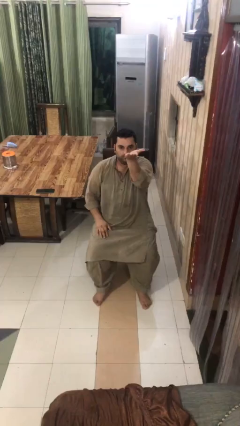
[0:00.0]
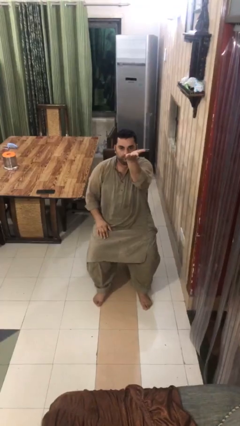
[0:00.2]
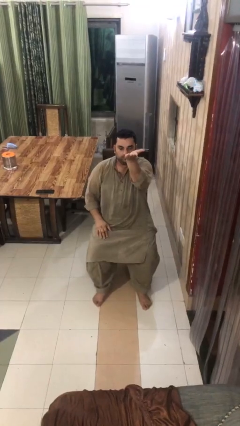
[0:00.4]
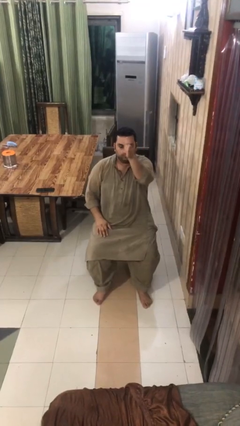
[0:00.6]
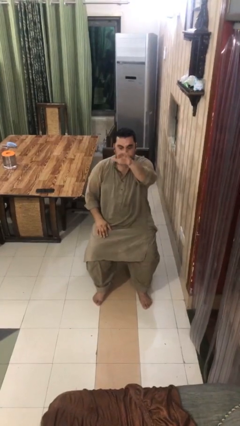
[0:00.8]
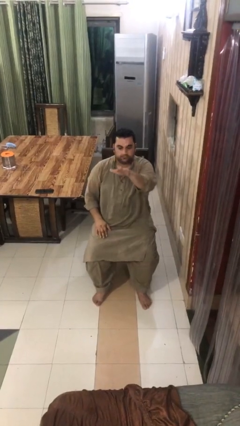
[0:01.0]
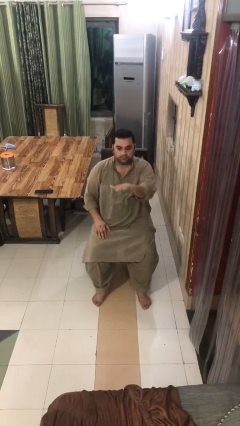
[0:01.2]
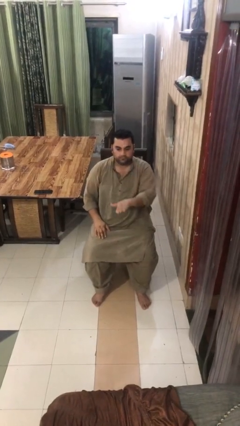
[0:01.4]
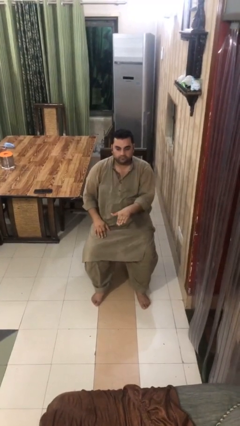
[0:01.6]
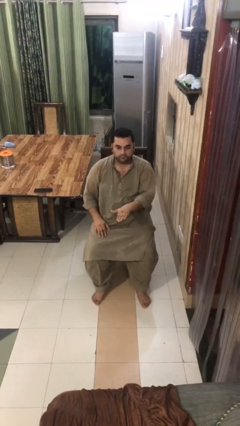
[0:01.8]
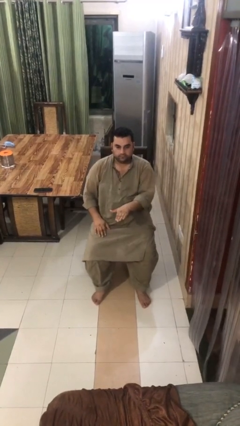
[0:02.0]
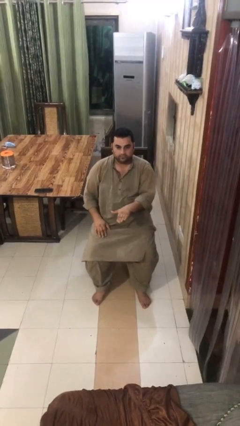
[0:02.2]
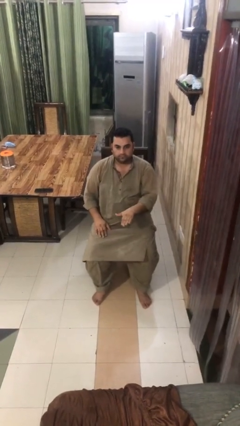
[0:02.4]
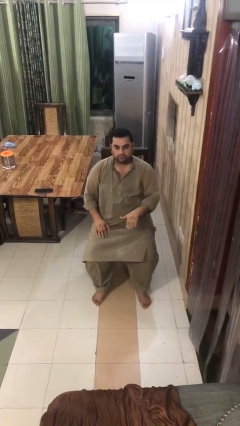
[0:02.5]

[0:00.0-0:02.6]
person gestures swipe down

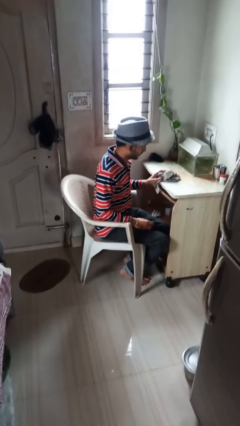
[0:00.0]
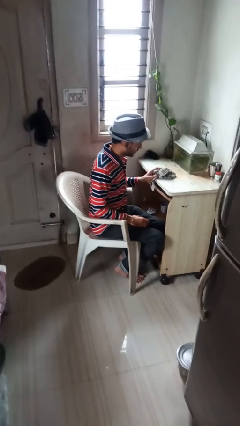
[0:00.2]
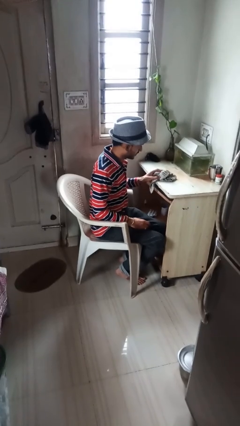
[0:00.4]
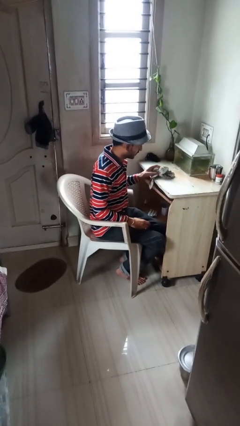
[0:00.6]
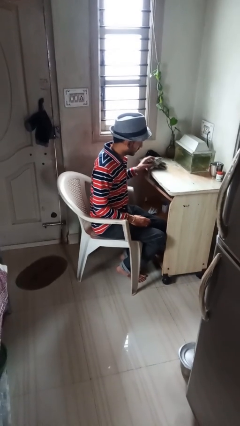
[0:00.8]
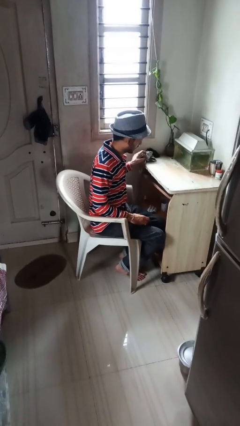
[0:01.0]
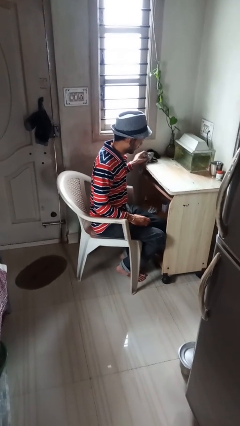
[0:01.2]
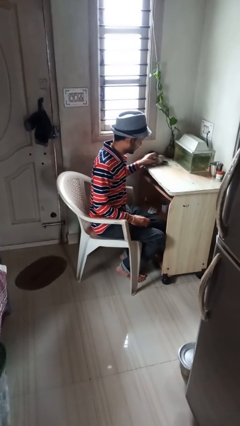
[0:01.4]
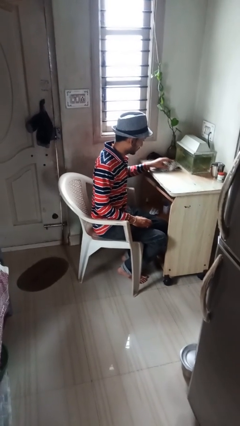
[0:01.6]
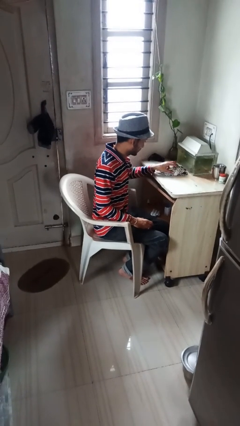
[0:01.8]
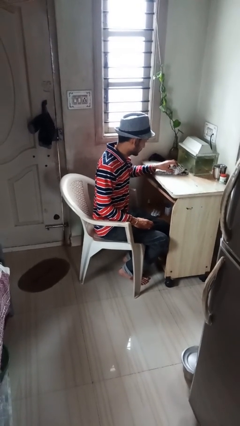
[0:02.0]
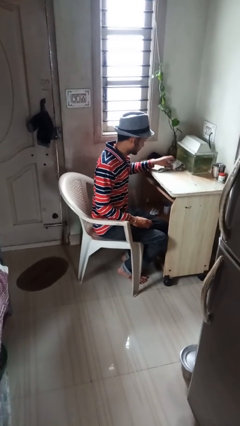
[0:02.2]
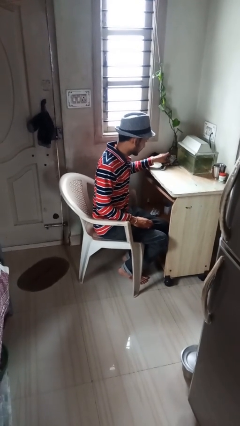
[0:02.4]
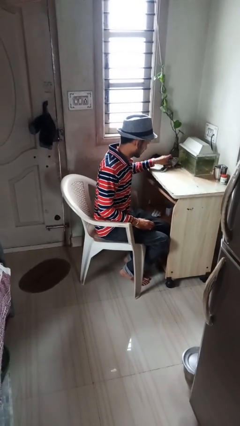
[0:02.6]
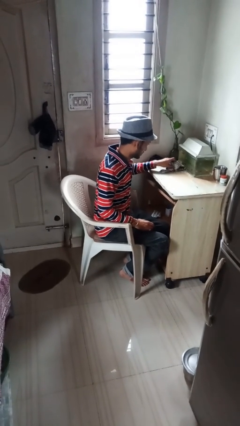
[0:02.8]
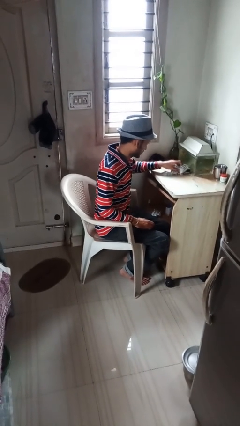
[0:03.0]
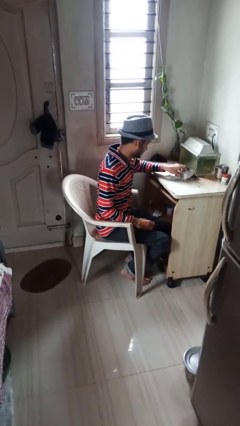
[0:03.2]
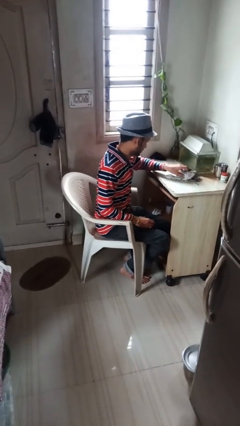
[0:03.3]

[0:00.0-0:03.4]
person cleans table with rag

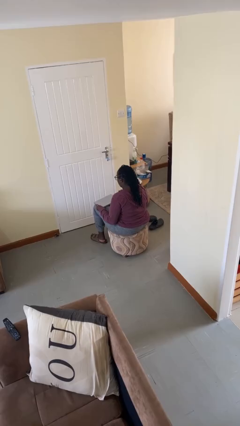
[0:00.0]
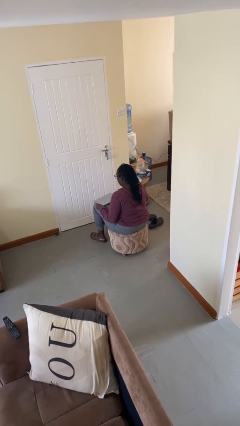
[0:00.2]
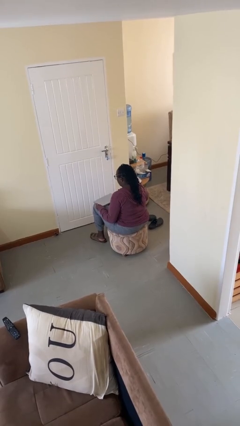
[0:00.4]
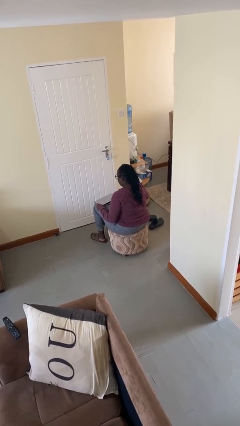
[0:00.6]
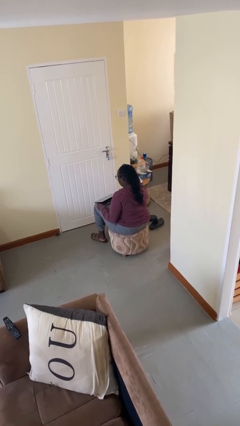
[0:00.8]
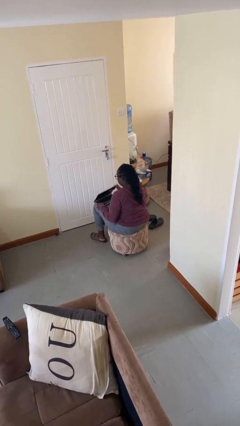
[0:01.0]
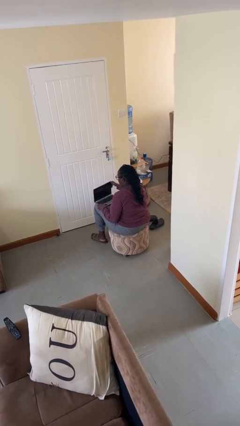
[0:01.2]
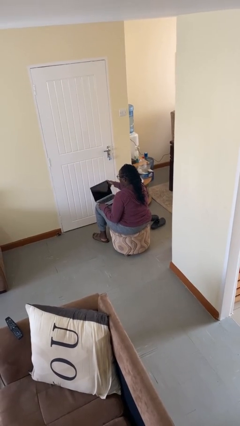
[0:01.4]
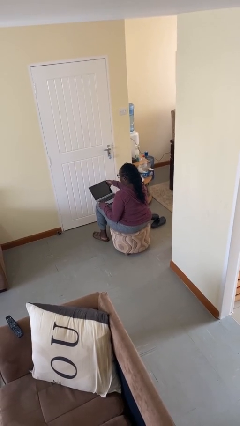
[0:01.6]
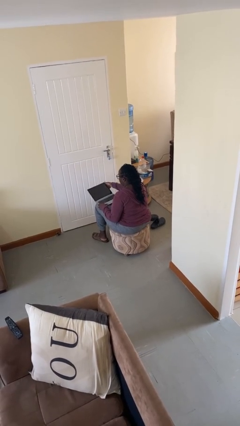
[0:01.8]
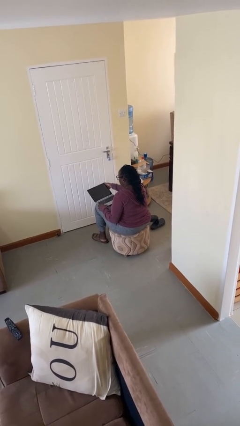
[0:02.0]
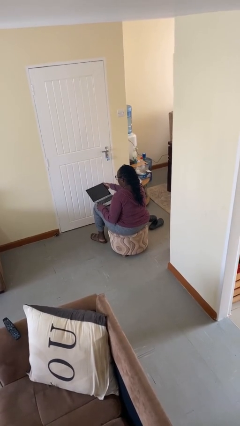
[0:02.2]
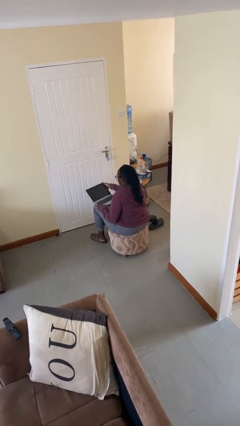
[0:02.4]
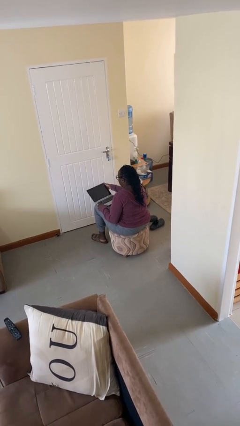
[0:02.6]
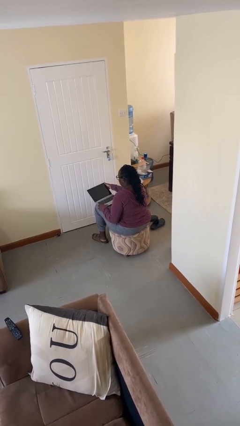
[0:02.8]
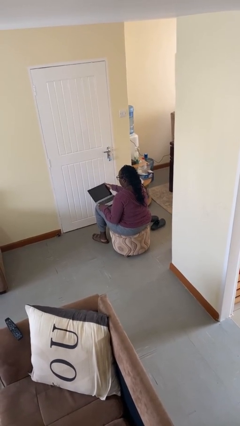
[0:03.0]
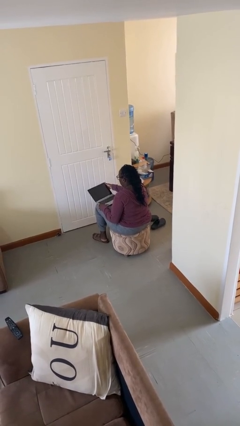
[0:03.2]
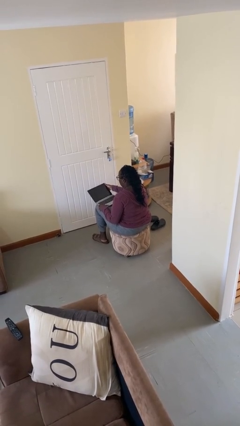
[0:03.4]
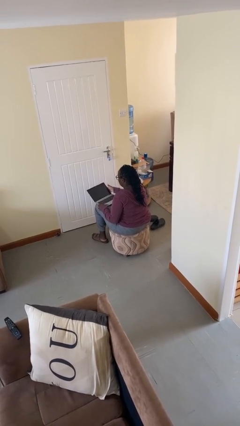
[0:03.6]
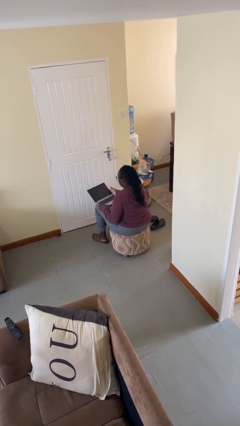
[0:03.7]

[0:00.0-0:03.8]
person opens laptop

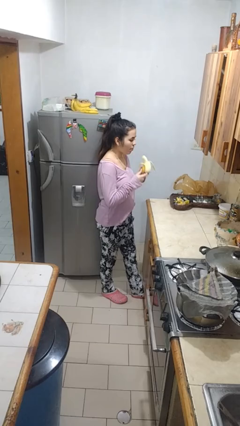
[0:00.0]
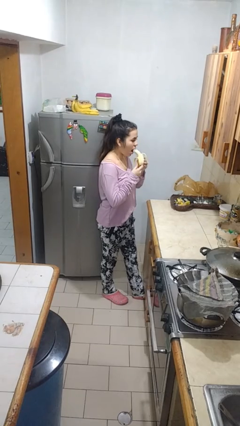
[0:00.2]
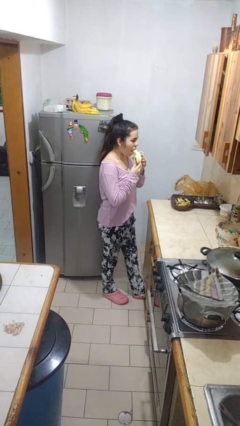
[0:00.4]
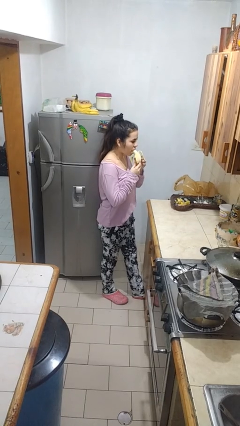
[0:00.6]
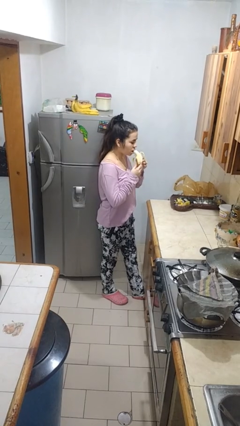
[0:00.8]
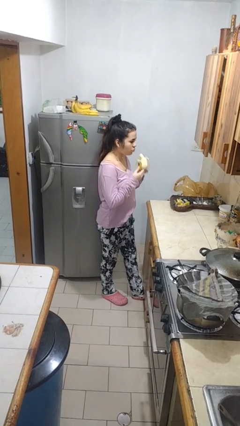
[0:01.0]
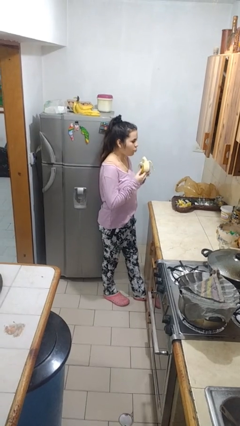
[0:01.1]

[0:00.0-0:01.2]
person eats banana

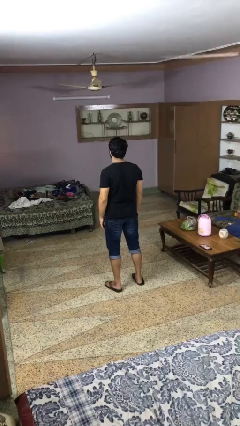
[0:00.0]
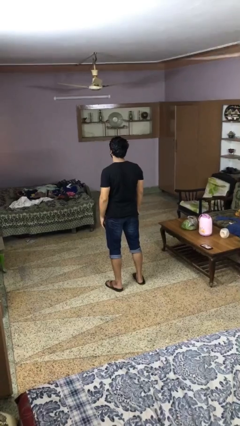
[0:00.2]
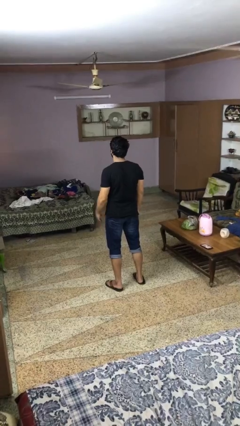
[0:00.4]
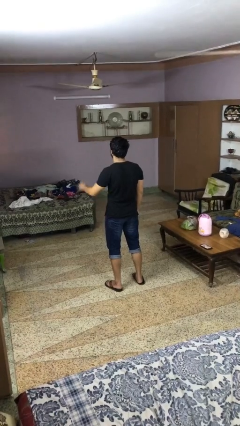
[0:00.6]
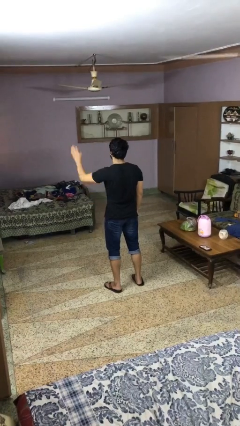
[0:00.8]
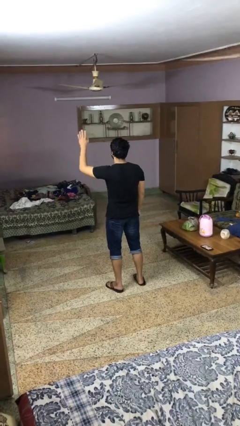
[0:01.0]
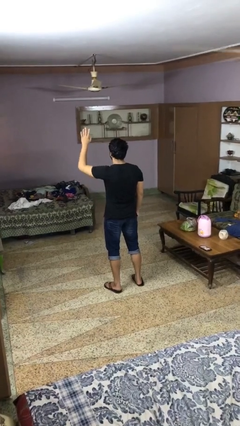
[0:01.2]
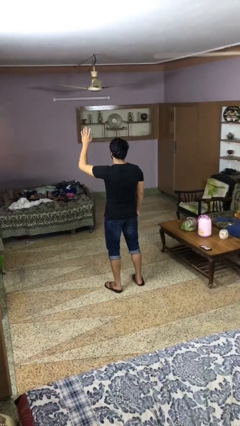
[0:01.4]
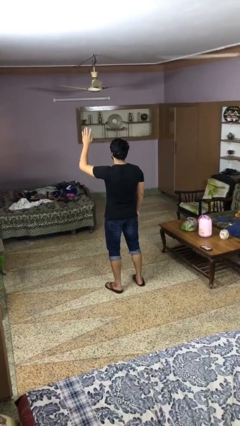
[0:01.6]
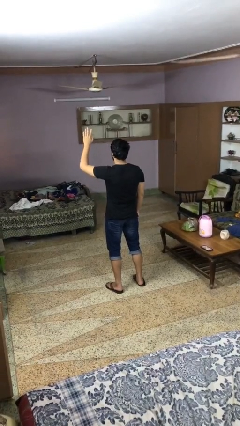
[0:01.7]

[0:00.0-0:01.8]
person gestures raise hand

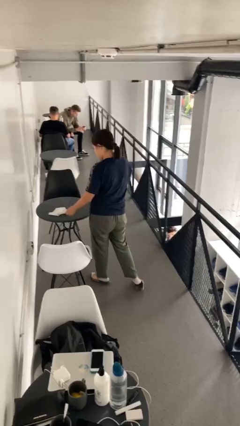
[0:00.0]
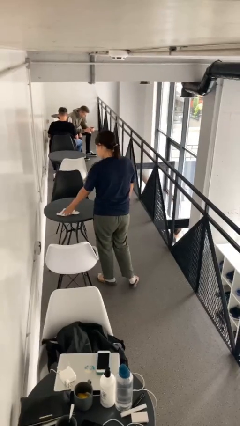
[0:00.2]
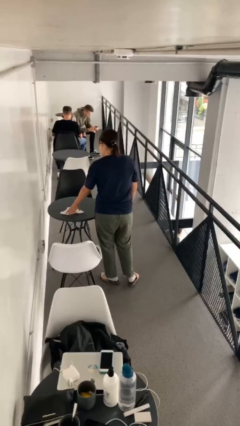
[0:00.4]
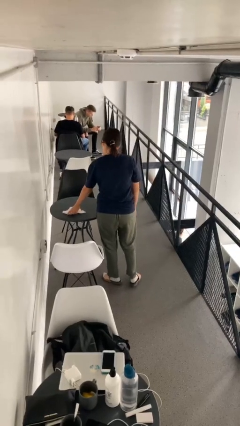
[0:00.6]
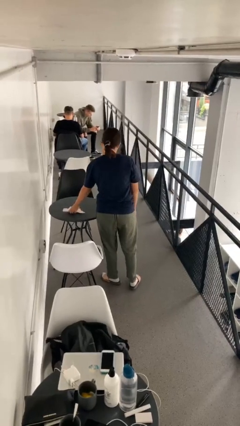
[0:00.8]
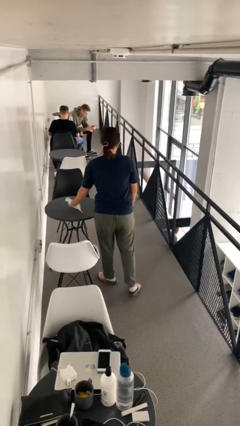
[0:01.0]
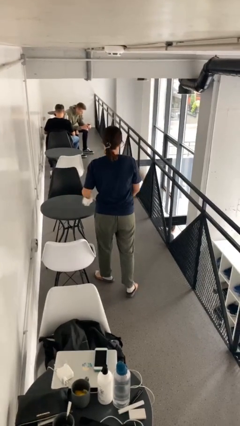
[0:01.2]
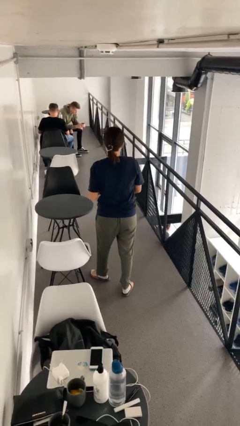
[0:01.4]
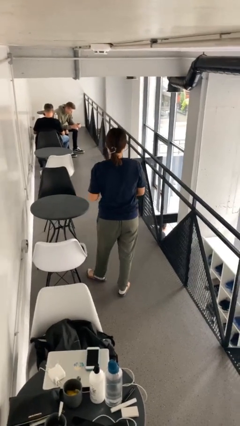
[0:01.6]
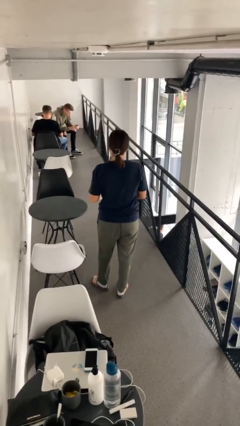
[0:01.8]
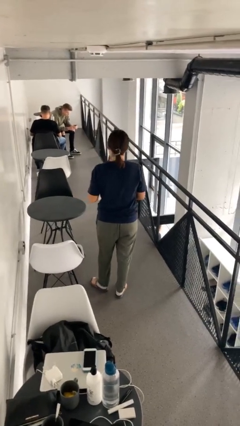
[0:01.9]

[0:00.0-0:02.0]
person picks up object from table

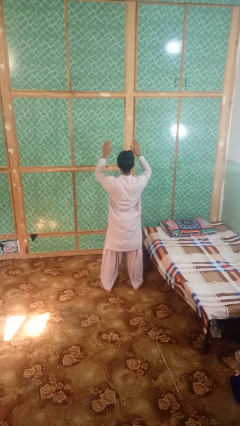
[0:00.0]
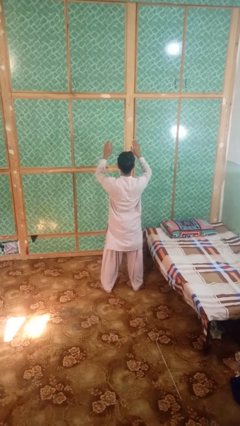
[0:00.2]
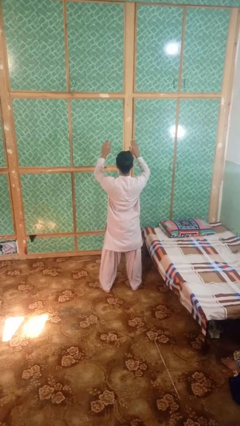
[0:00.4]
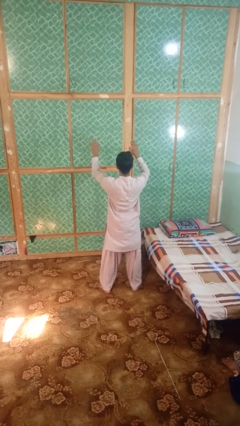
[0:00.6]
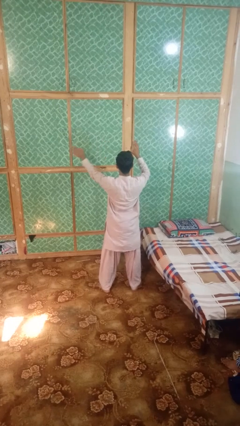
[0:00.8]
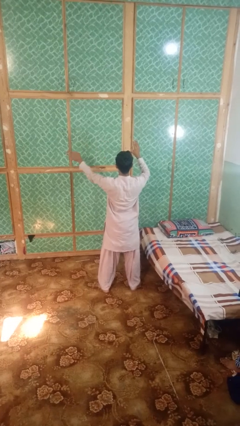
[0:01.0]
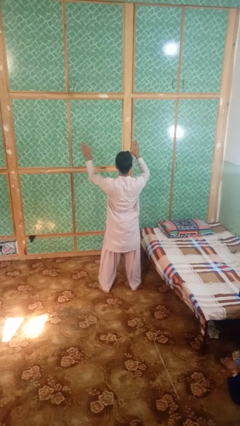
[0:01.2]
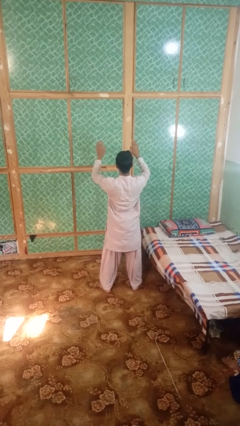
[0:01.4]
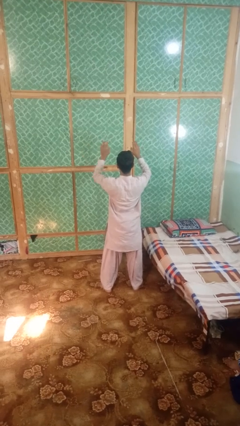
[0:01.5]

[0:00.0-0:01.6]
person gestures swipe left

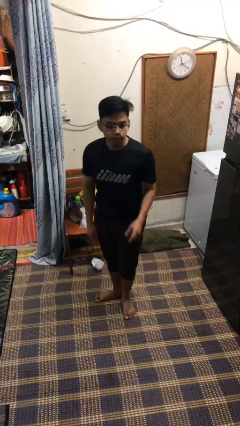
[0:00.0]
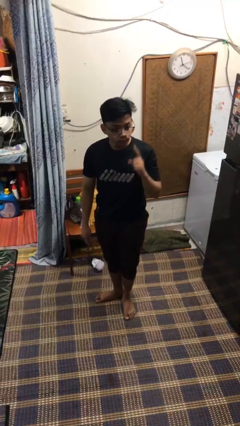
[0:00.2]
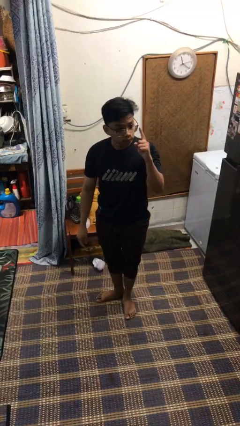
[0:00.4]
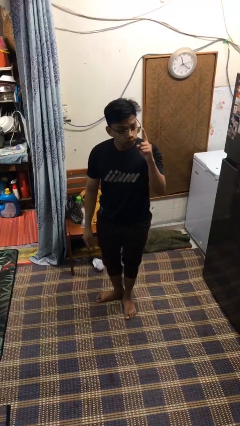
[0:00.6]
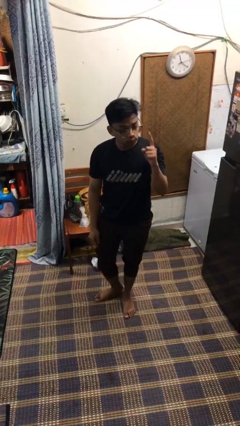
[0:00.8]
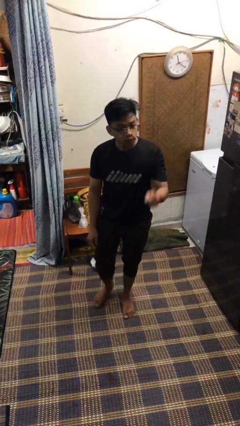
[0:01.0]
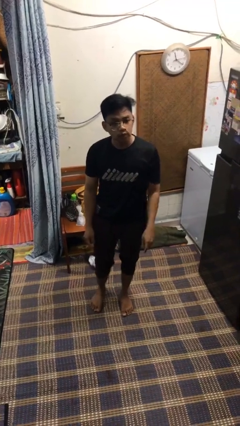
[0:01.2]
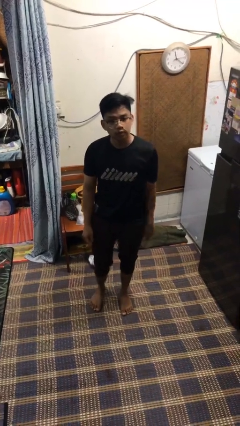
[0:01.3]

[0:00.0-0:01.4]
person gestures number one
